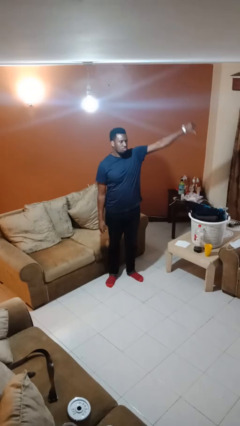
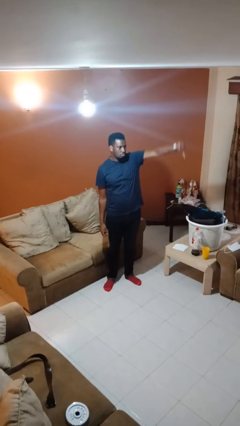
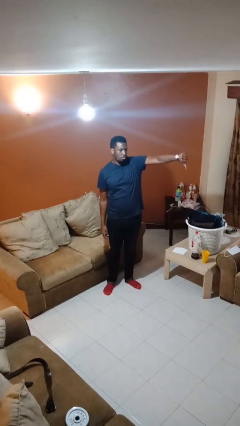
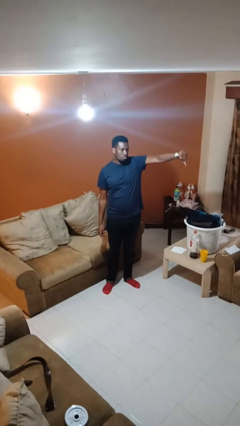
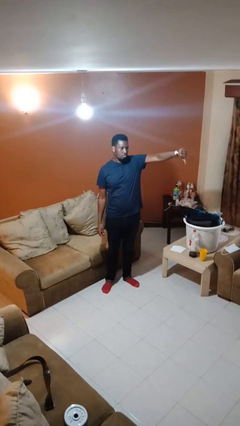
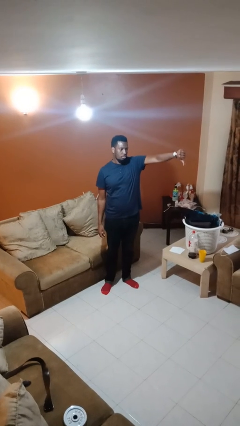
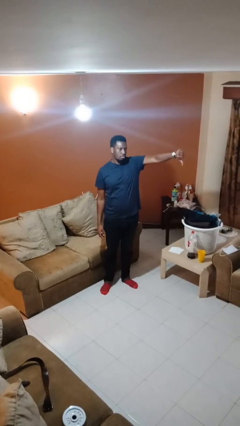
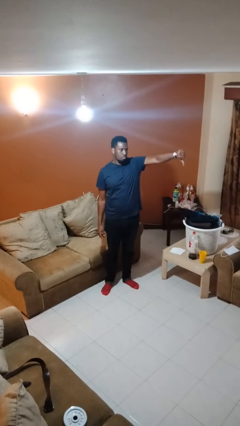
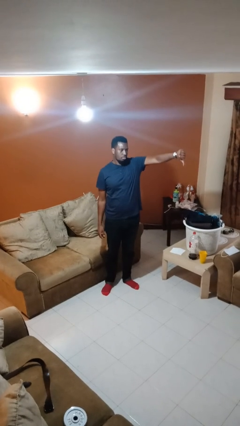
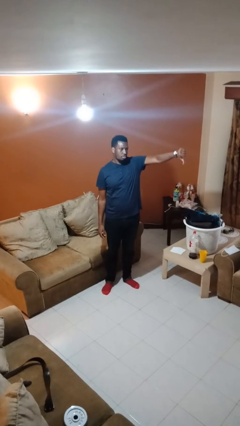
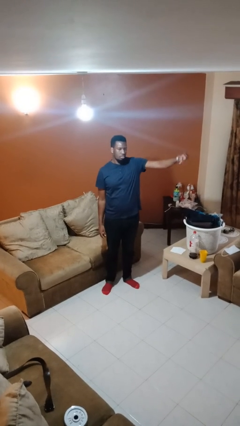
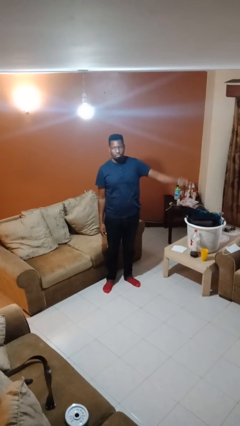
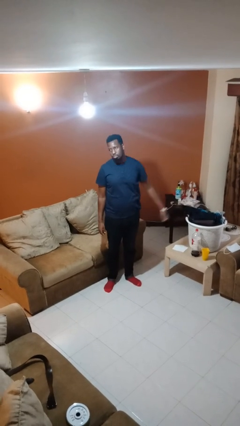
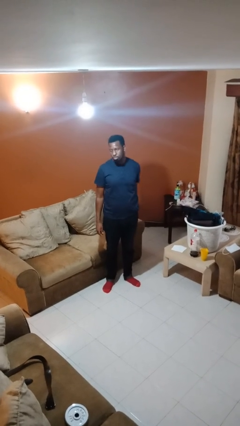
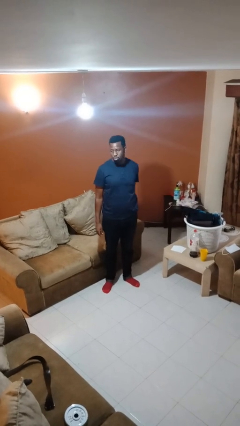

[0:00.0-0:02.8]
person gestures thumbs down

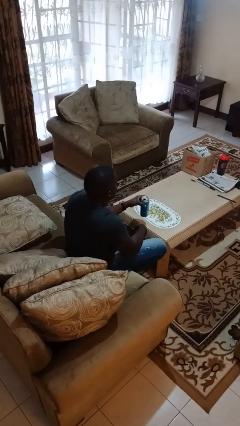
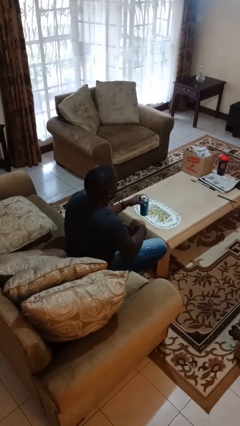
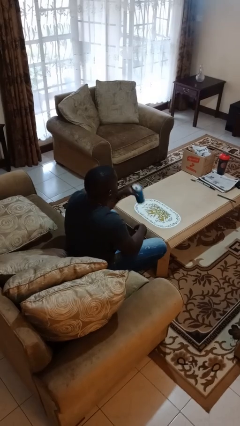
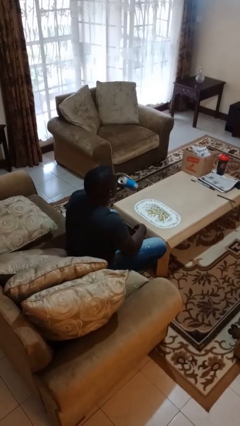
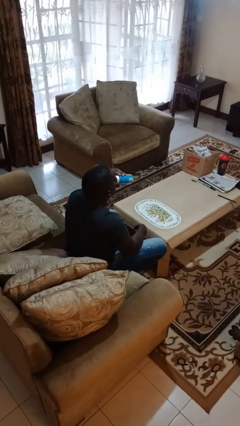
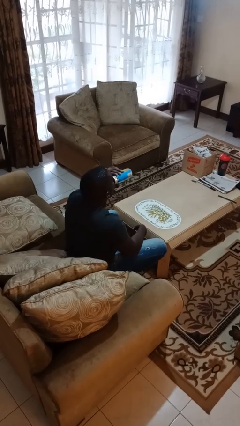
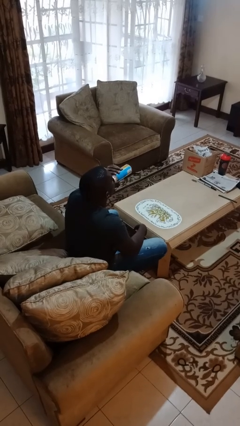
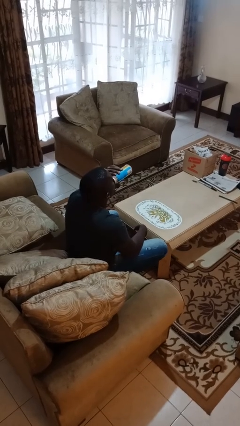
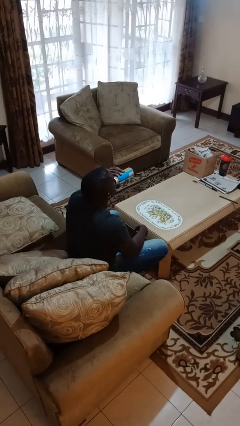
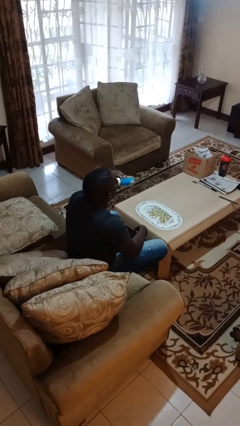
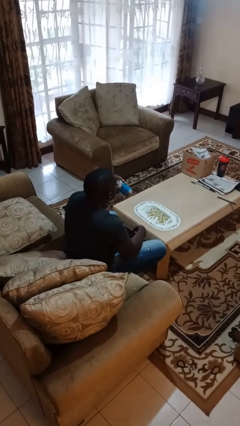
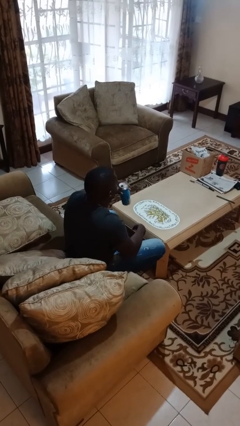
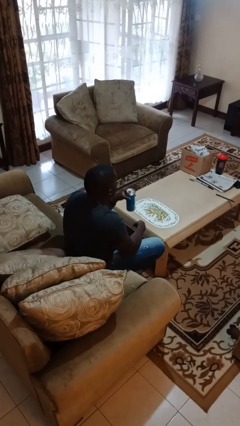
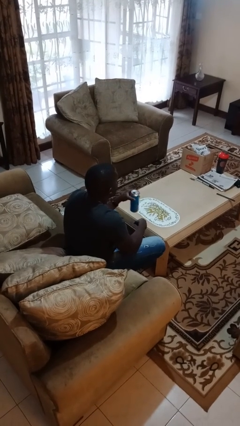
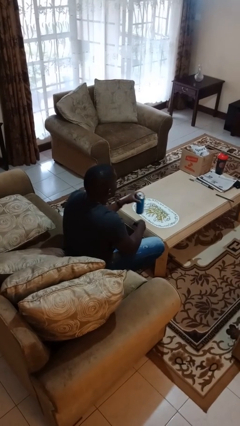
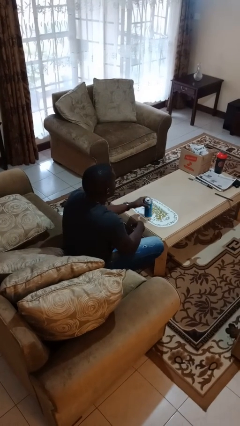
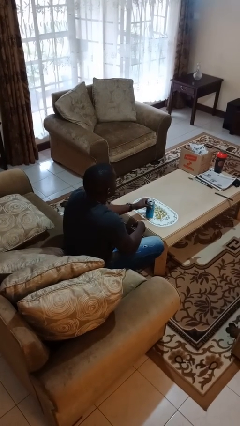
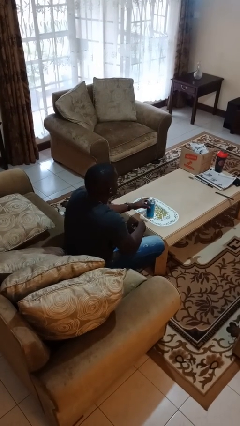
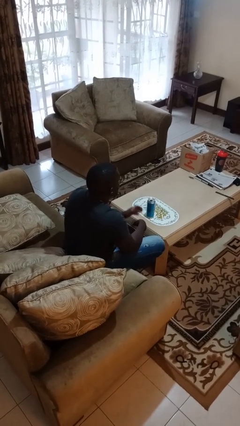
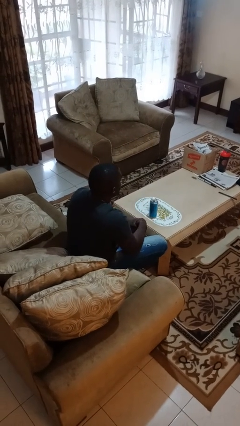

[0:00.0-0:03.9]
person drinks from beverage can

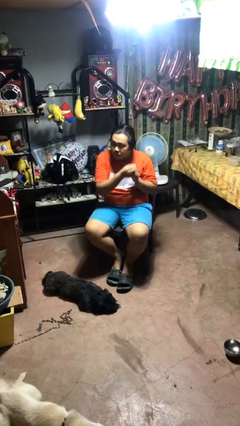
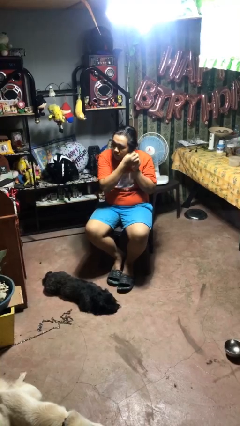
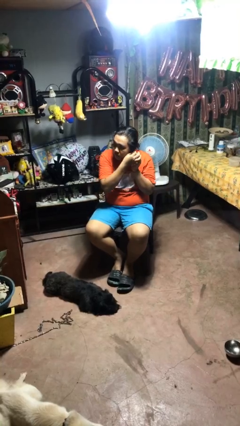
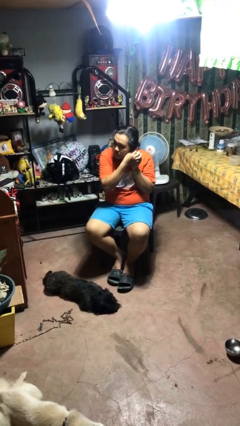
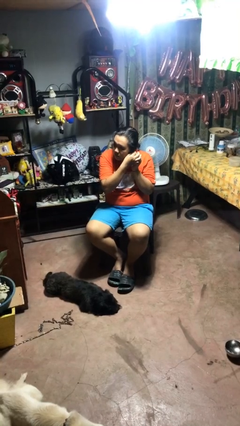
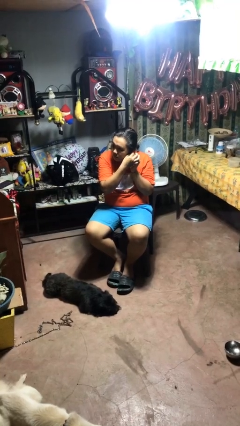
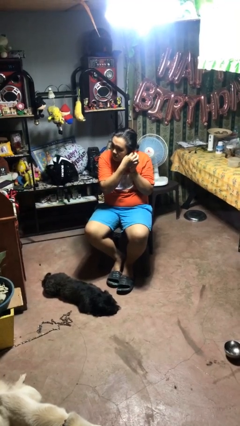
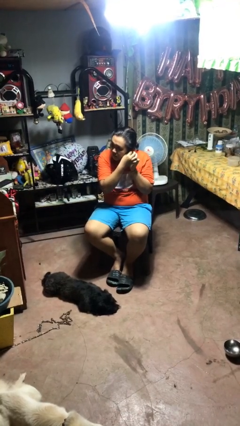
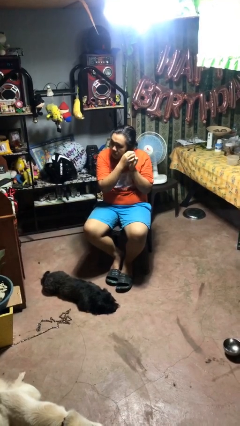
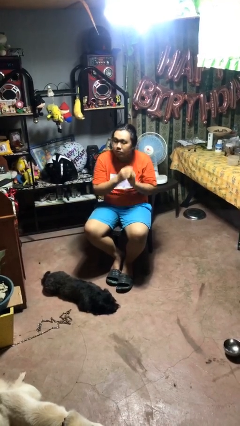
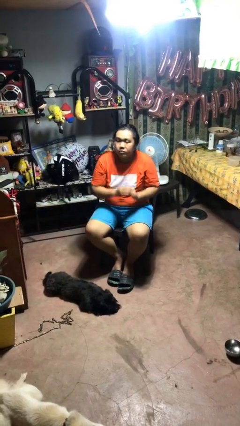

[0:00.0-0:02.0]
person puts on earrings

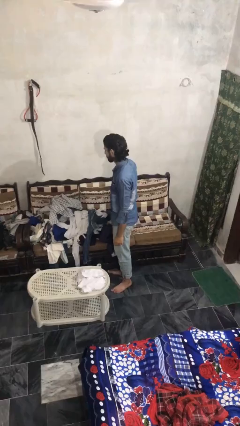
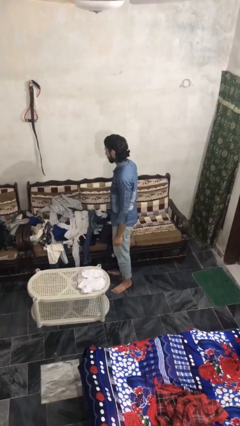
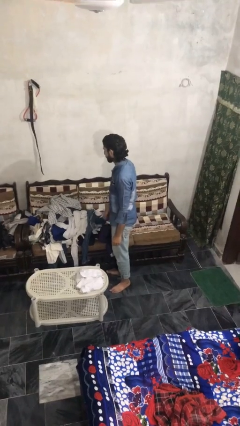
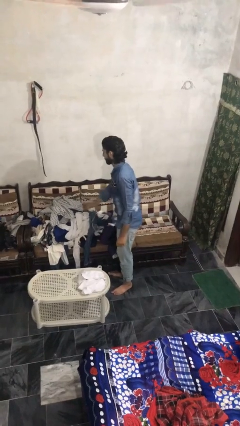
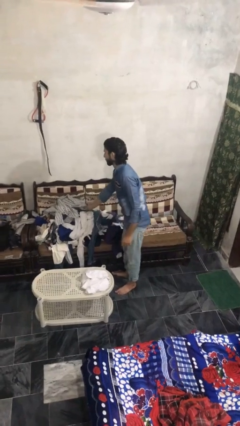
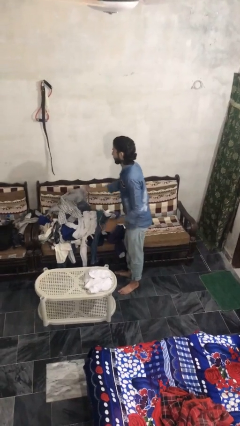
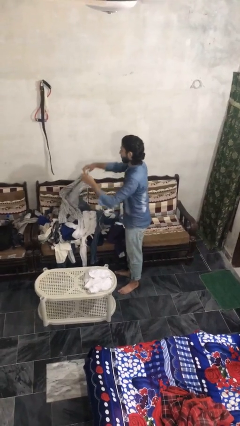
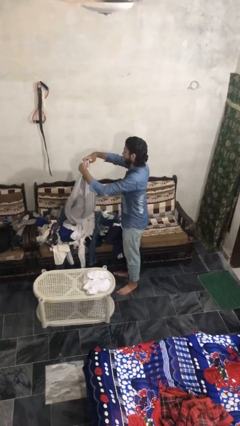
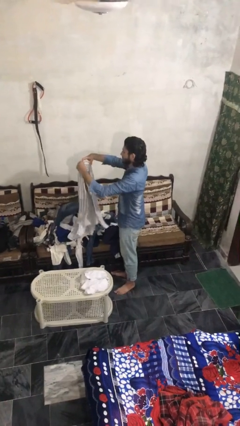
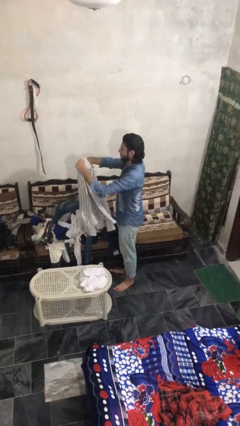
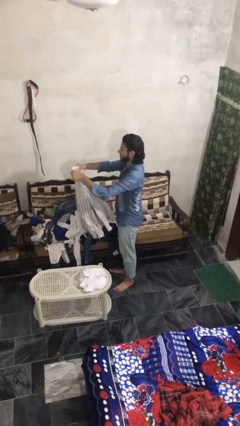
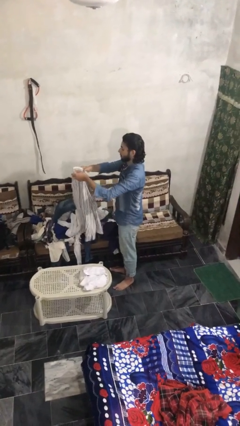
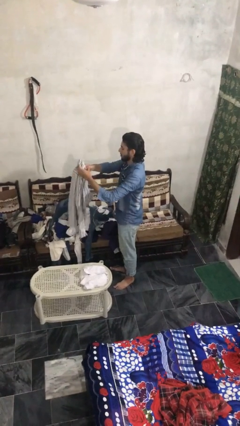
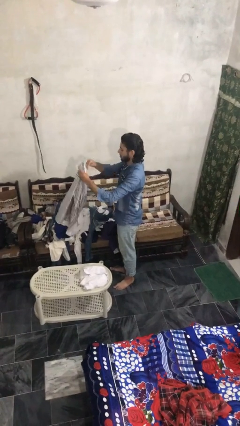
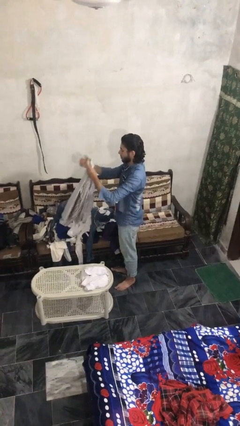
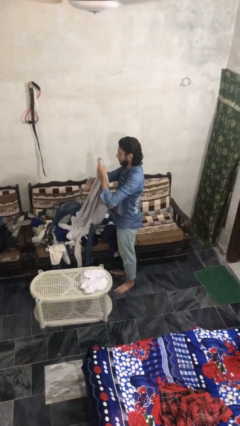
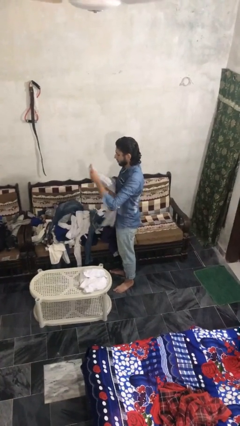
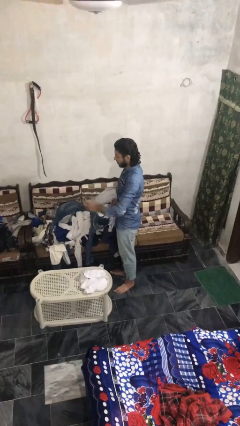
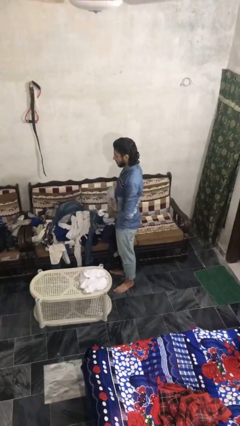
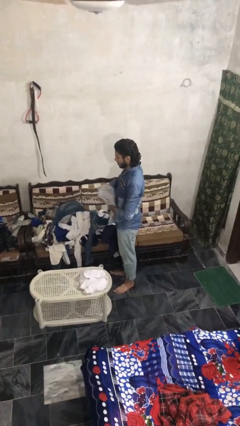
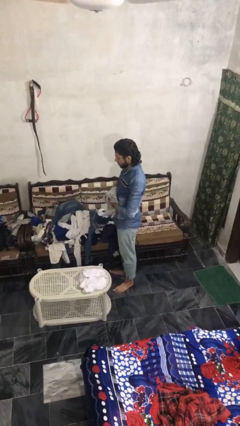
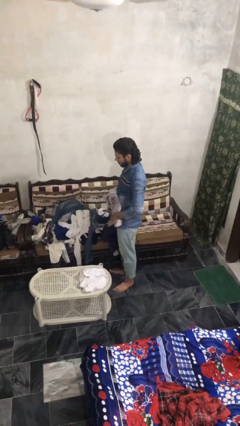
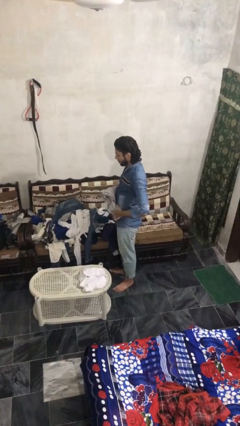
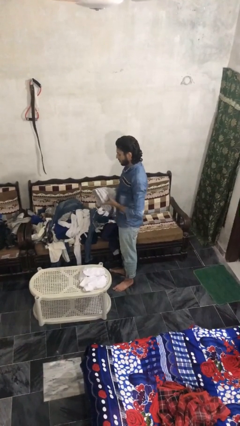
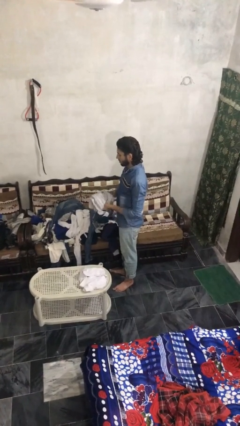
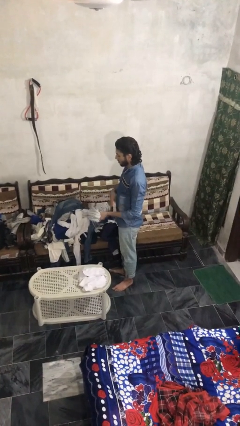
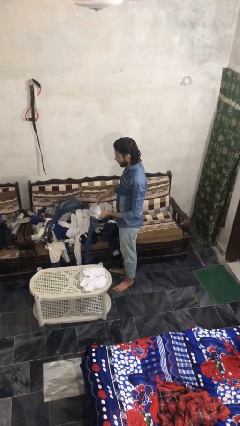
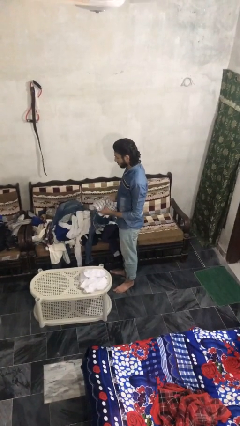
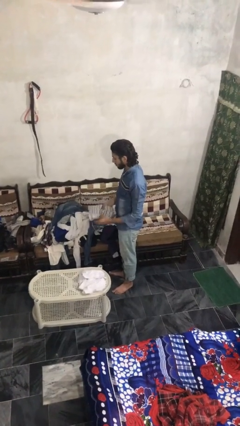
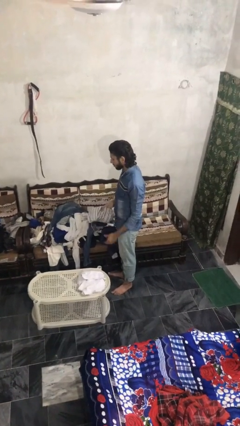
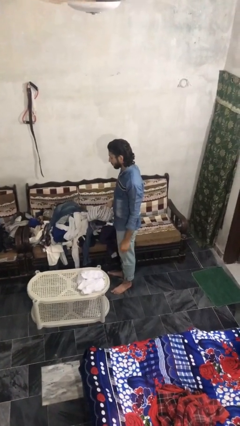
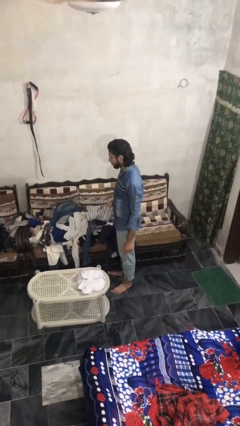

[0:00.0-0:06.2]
person folds shirt

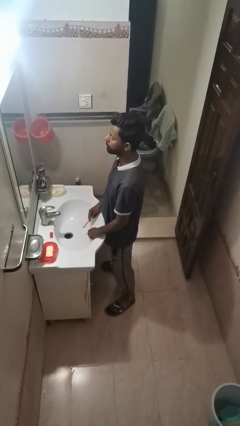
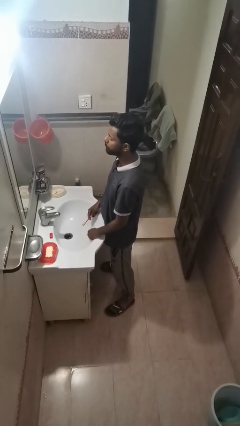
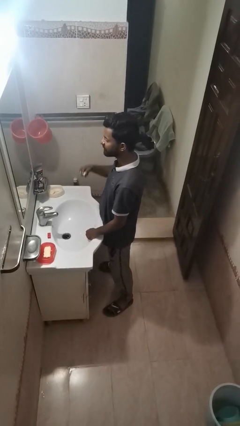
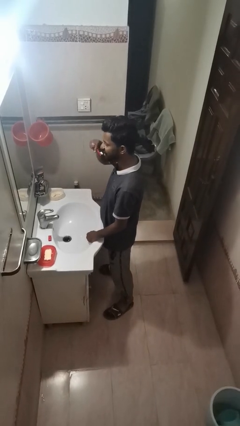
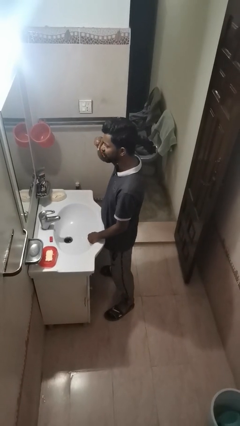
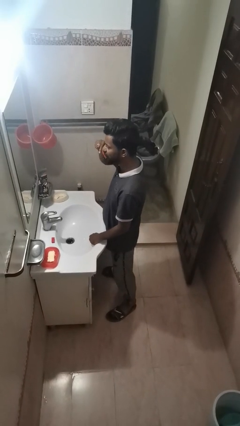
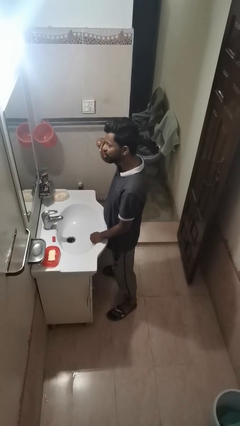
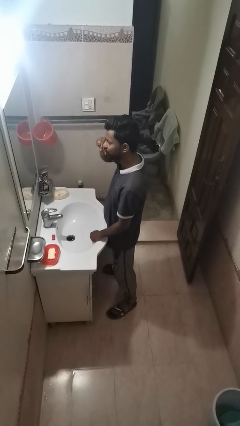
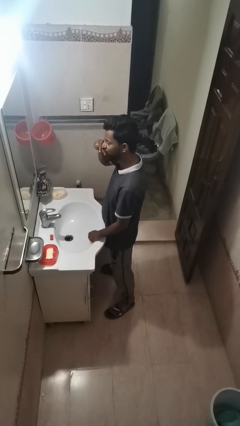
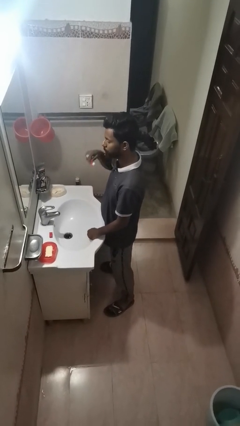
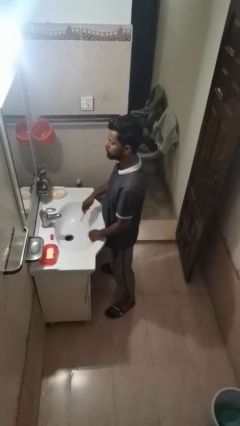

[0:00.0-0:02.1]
person brushes teeth

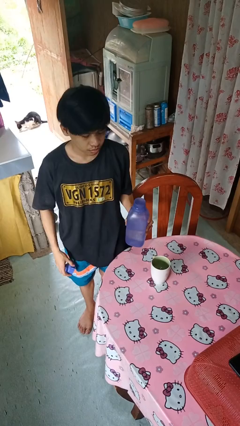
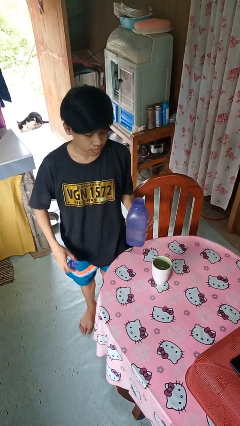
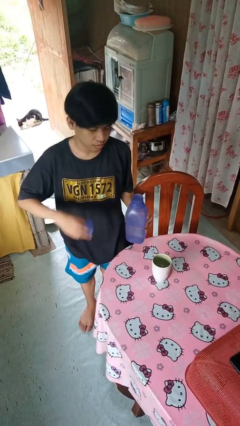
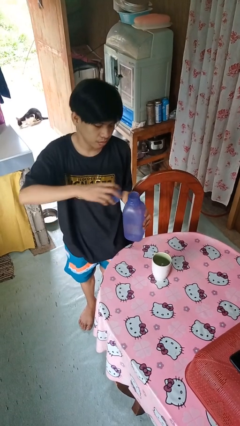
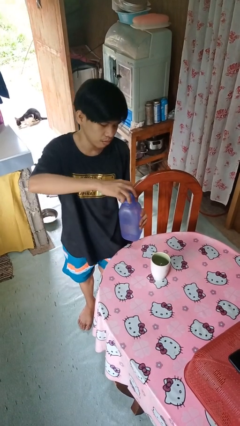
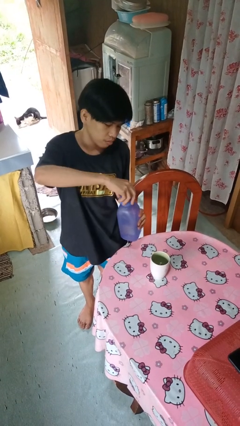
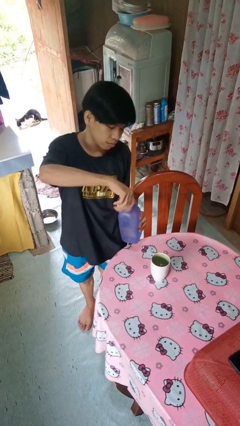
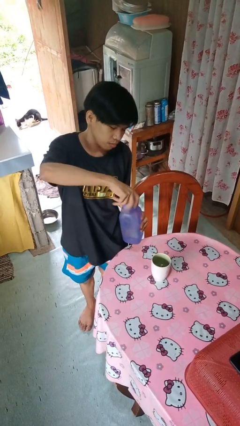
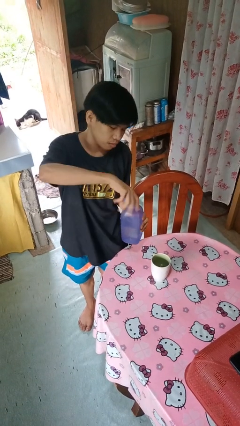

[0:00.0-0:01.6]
person screws lid to bottle
